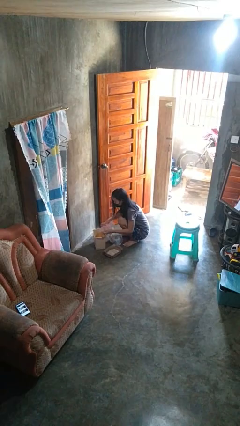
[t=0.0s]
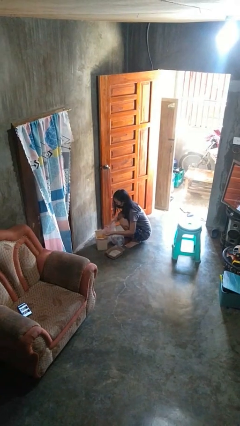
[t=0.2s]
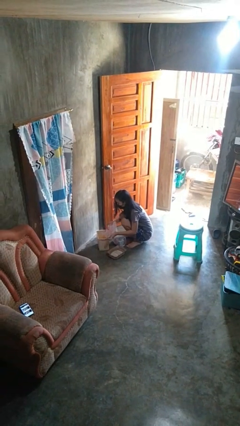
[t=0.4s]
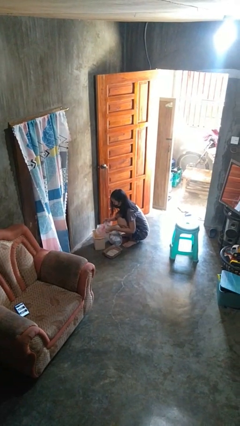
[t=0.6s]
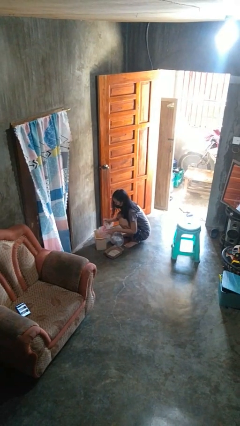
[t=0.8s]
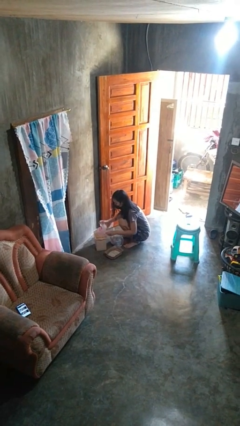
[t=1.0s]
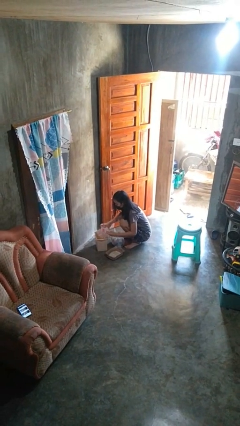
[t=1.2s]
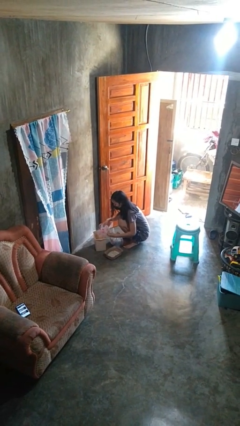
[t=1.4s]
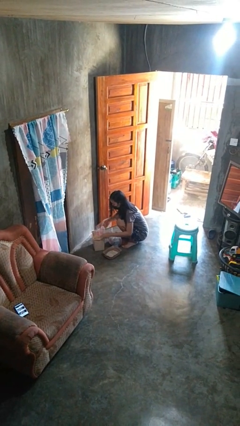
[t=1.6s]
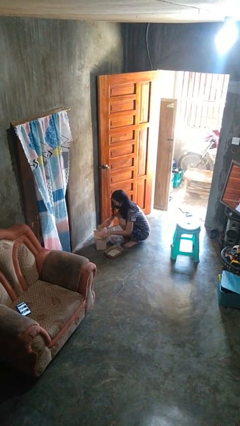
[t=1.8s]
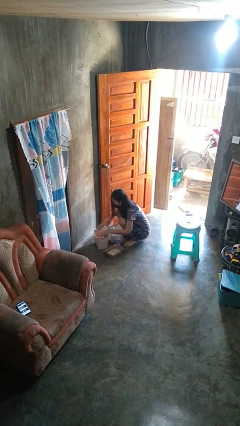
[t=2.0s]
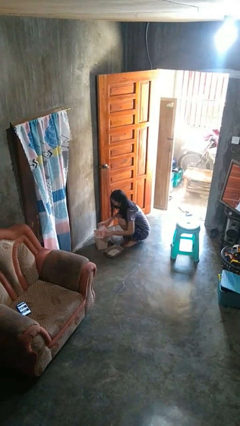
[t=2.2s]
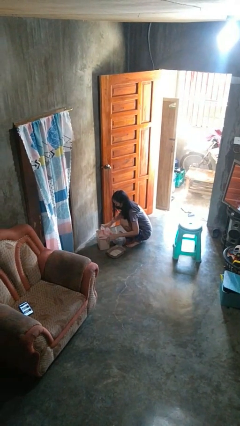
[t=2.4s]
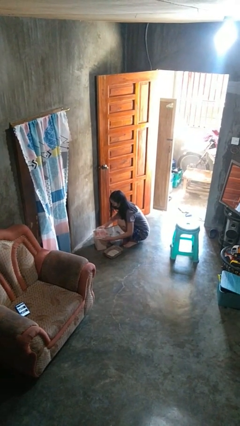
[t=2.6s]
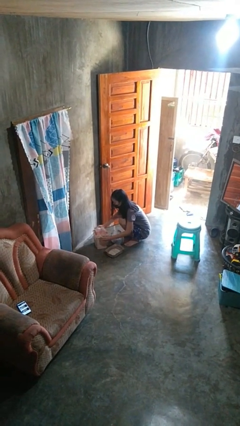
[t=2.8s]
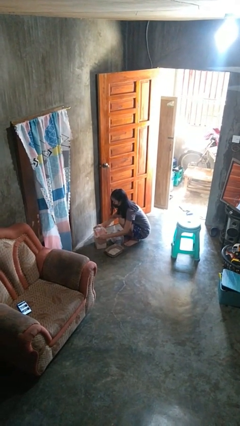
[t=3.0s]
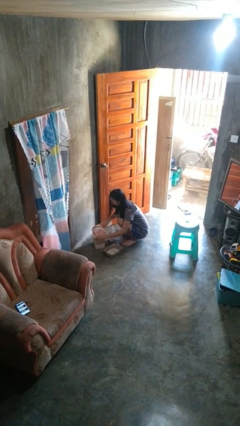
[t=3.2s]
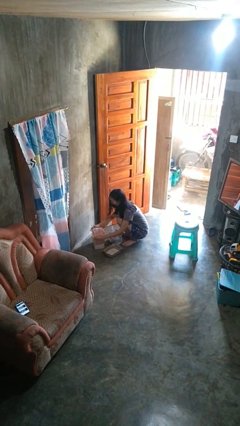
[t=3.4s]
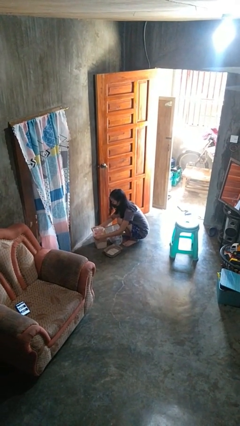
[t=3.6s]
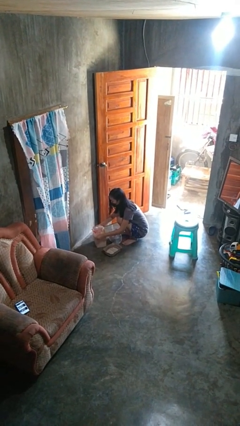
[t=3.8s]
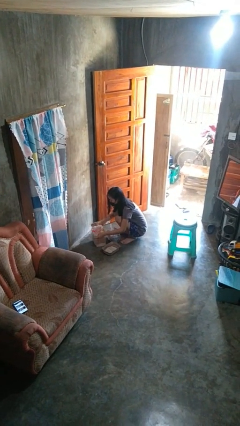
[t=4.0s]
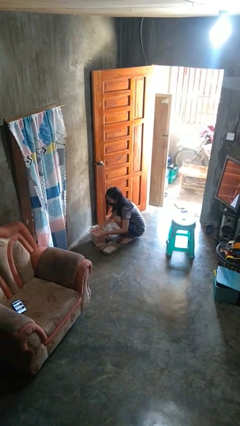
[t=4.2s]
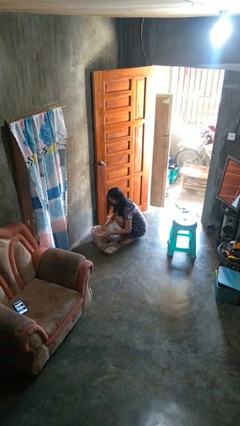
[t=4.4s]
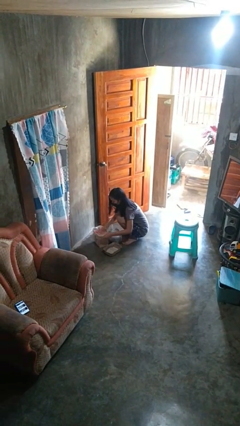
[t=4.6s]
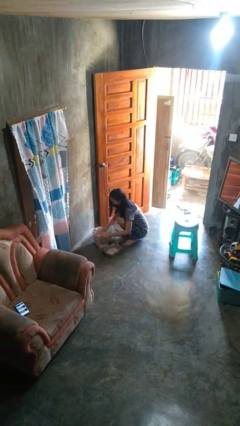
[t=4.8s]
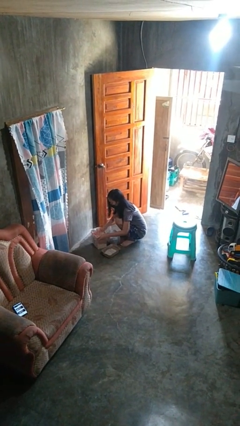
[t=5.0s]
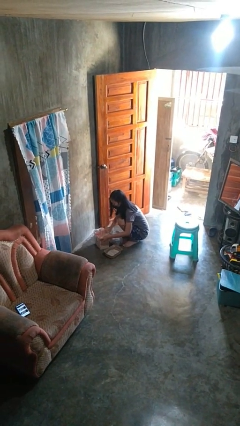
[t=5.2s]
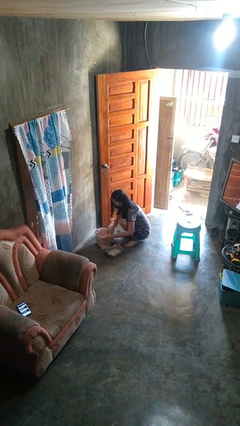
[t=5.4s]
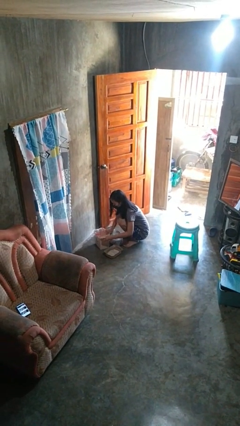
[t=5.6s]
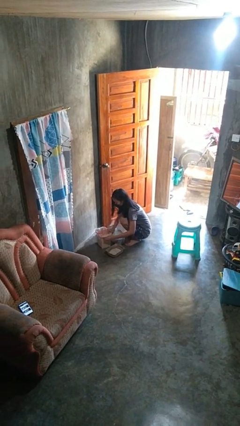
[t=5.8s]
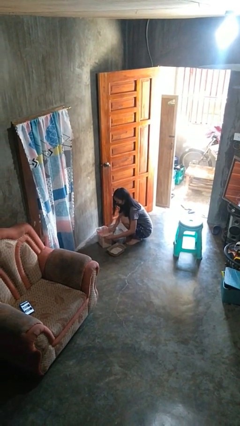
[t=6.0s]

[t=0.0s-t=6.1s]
person inserts trashbag into trashcan

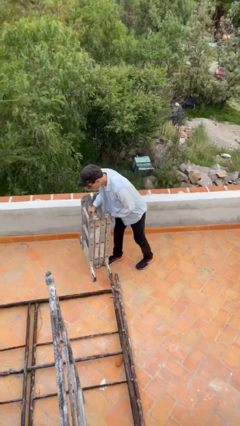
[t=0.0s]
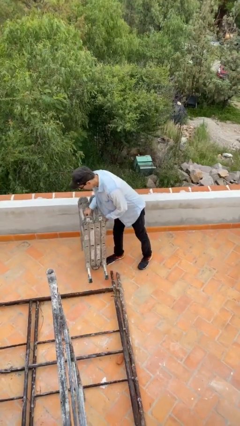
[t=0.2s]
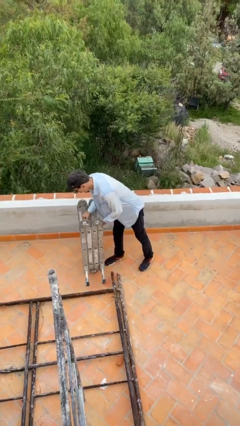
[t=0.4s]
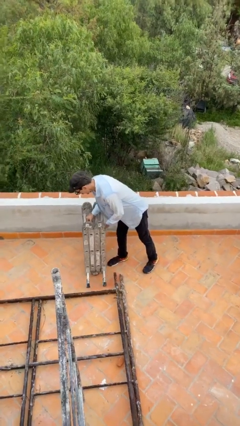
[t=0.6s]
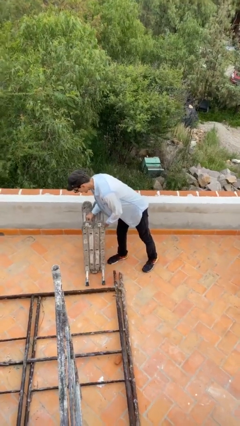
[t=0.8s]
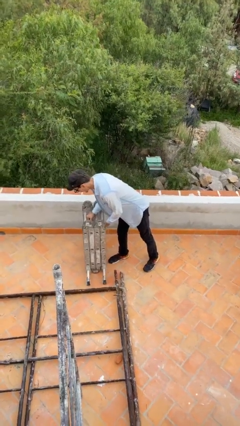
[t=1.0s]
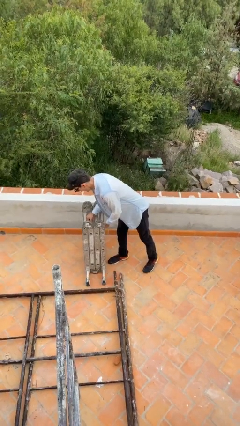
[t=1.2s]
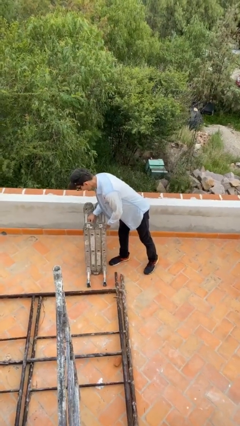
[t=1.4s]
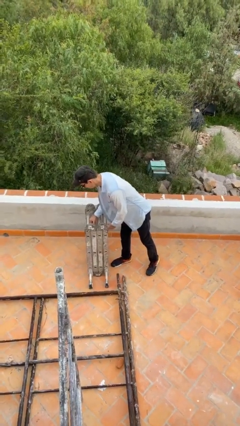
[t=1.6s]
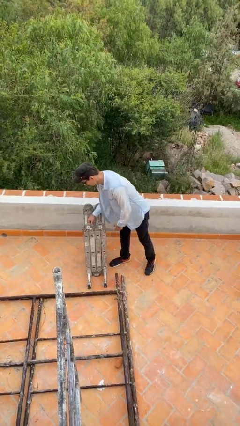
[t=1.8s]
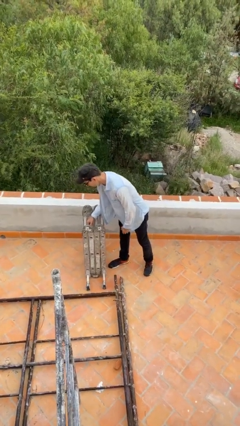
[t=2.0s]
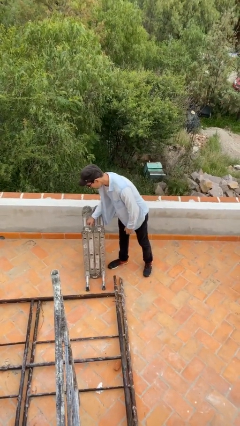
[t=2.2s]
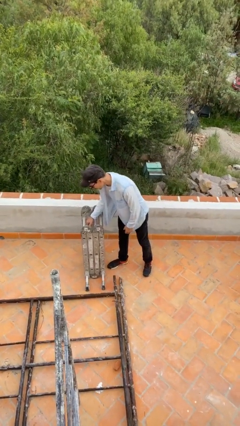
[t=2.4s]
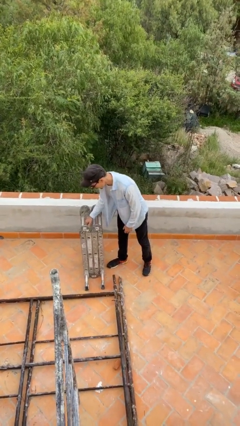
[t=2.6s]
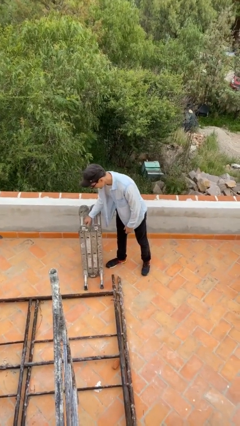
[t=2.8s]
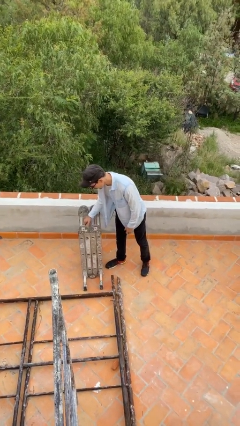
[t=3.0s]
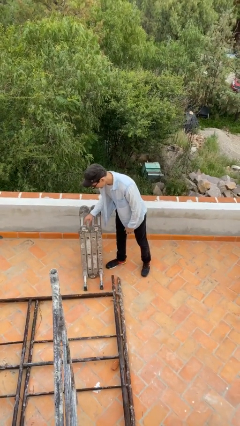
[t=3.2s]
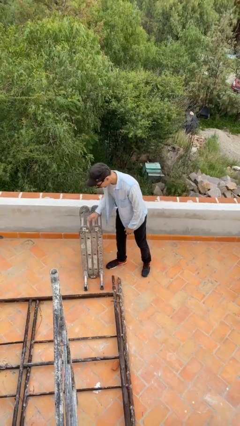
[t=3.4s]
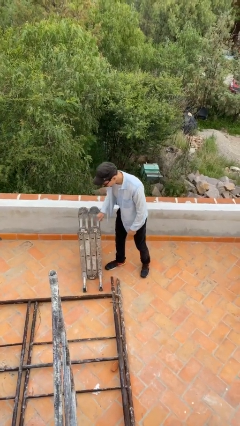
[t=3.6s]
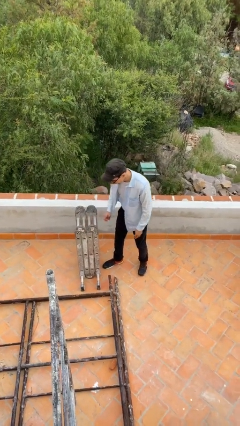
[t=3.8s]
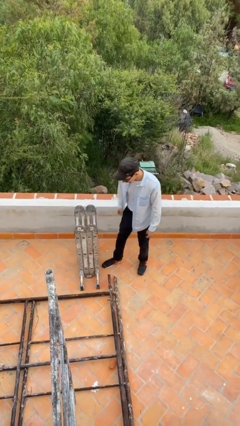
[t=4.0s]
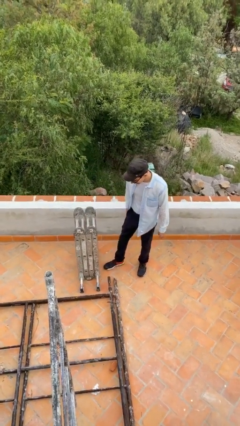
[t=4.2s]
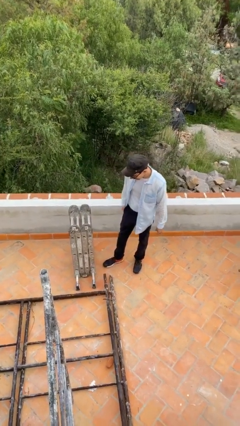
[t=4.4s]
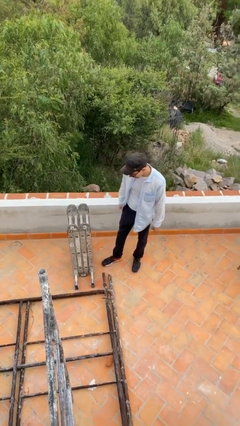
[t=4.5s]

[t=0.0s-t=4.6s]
person puts down object on floor

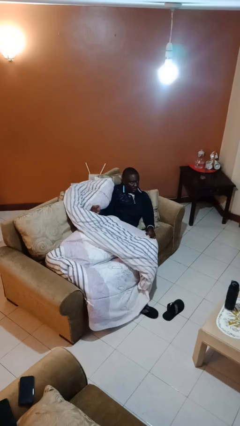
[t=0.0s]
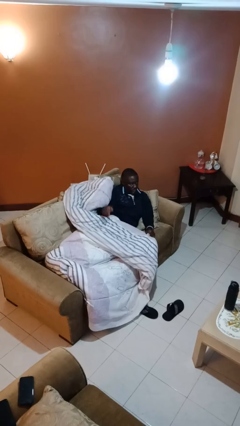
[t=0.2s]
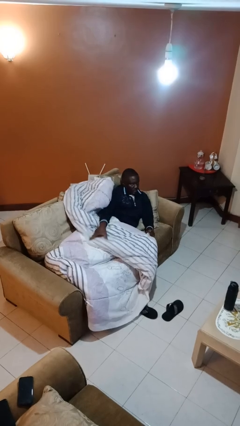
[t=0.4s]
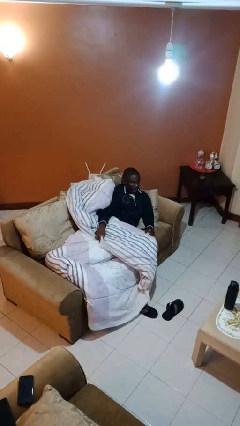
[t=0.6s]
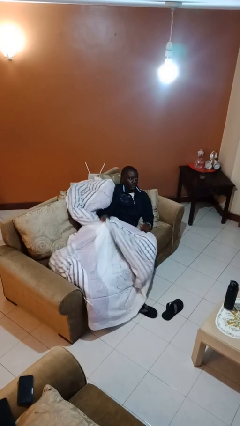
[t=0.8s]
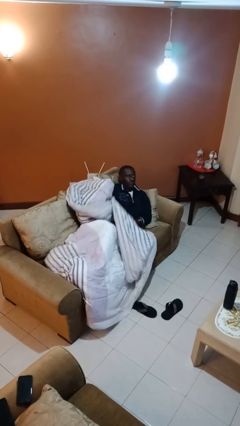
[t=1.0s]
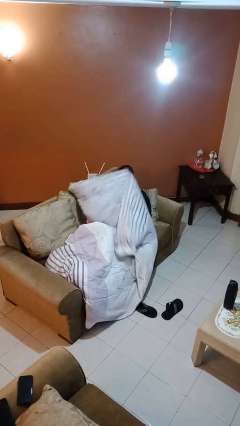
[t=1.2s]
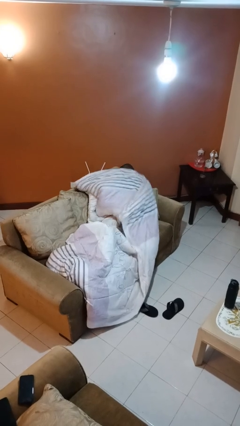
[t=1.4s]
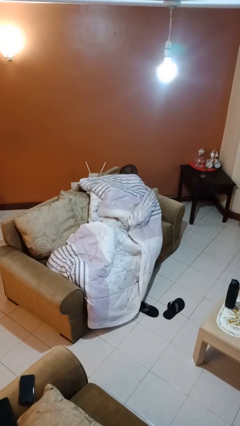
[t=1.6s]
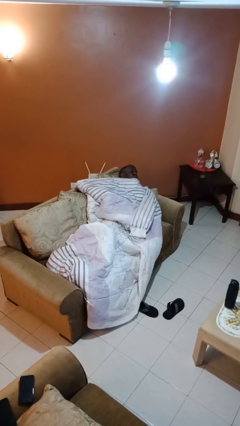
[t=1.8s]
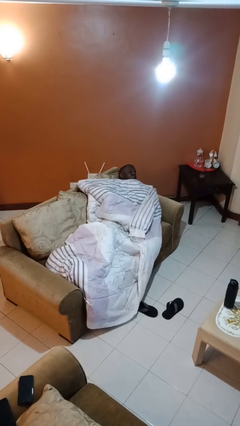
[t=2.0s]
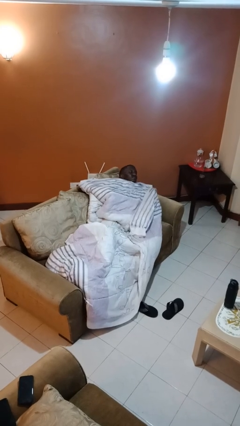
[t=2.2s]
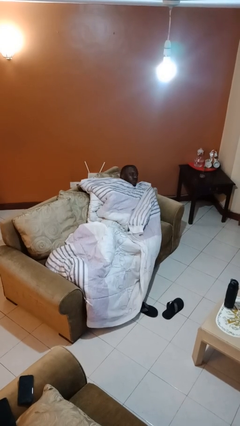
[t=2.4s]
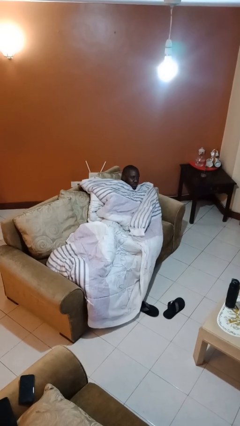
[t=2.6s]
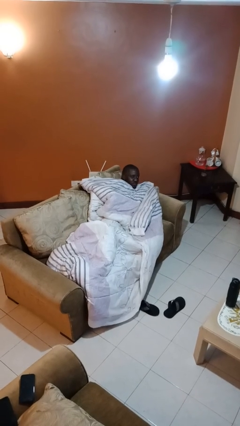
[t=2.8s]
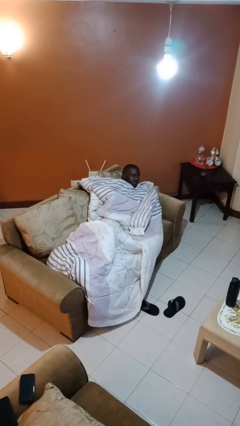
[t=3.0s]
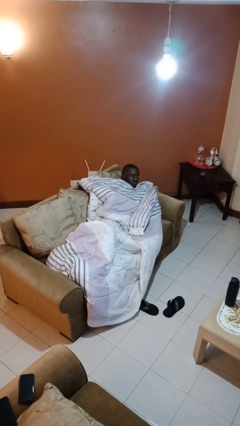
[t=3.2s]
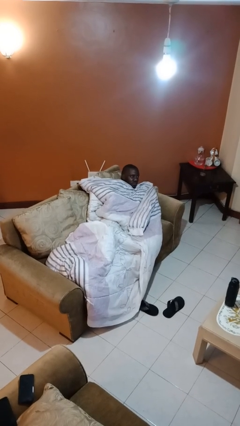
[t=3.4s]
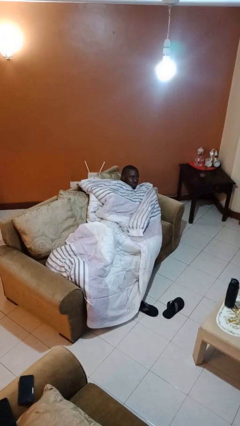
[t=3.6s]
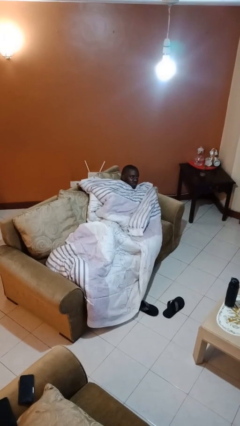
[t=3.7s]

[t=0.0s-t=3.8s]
person covers with blanket

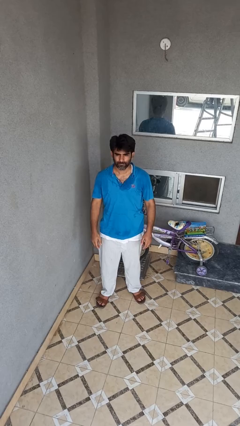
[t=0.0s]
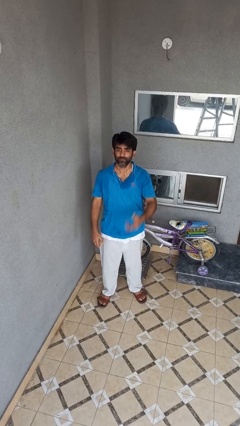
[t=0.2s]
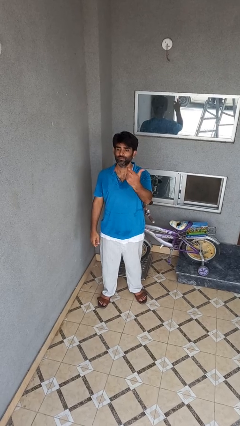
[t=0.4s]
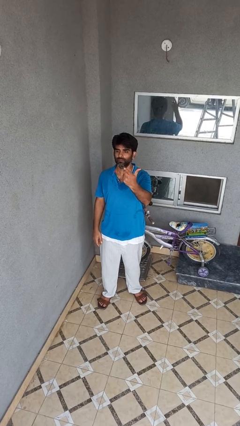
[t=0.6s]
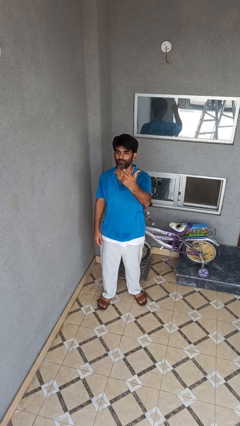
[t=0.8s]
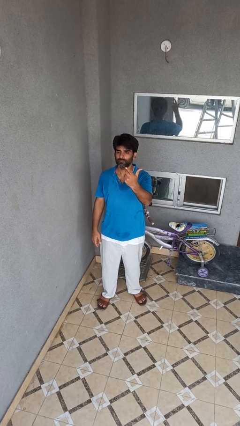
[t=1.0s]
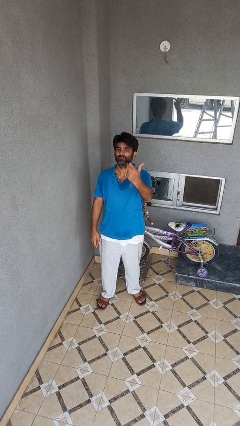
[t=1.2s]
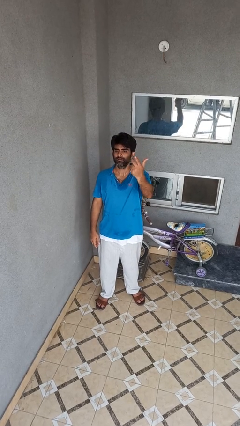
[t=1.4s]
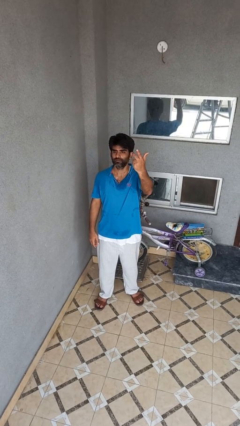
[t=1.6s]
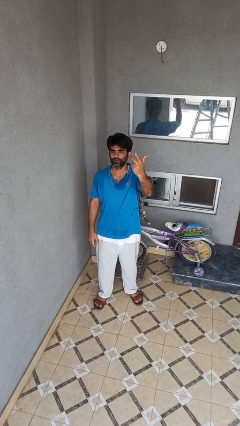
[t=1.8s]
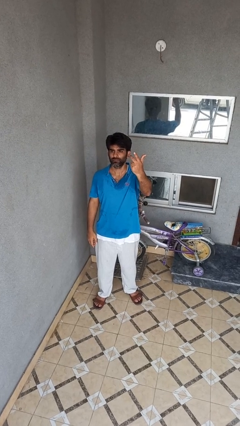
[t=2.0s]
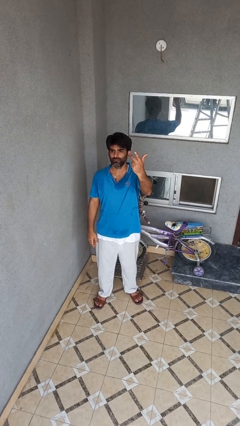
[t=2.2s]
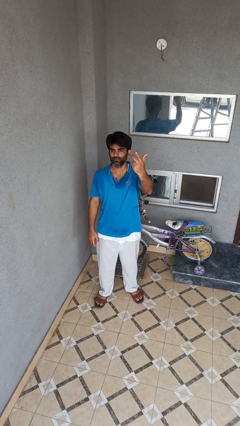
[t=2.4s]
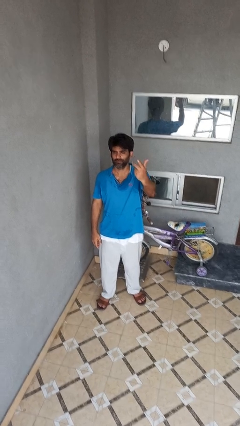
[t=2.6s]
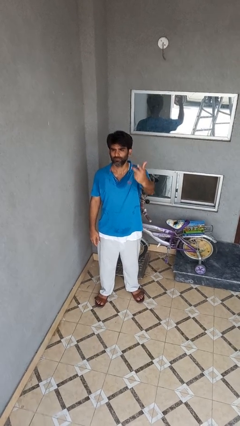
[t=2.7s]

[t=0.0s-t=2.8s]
person gestures raise hand

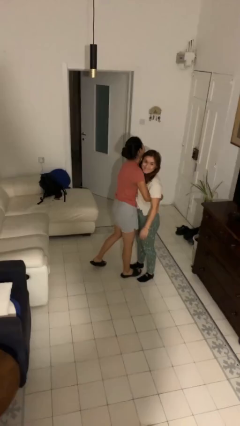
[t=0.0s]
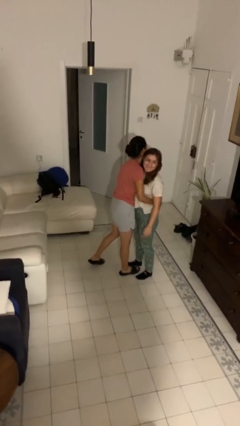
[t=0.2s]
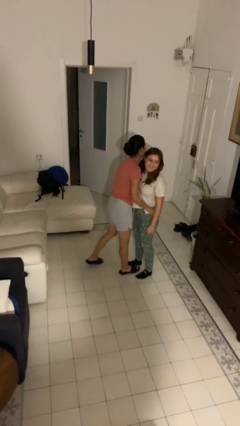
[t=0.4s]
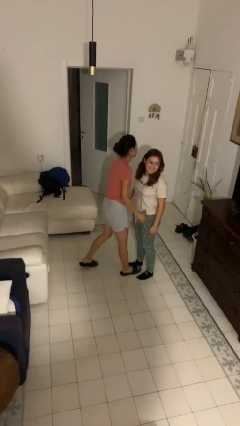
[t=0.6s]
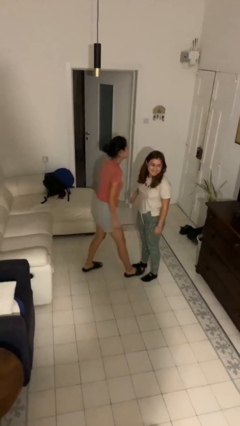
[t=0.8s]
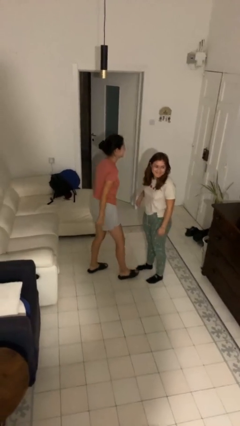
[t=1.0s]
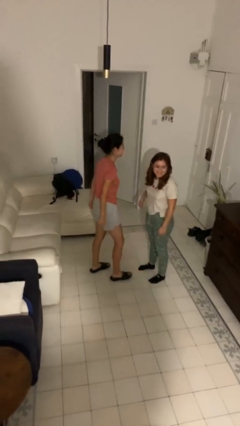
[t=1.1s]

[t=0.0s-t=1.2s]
person puts down person
